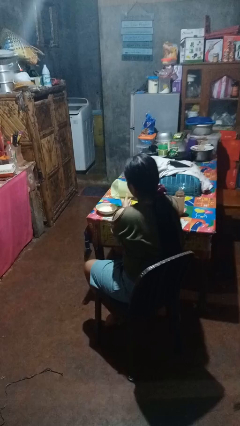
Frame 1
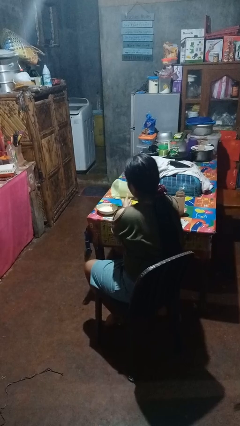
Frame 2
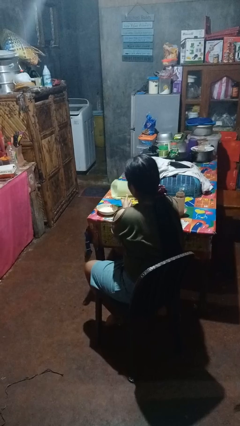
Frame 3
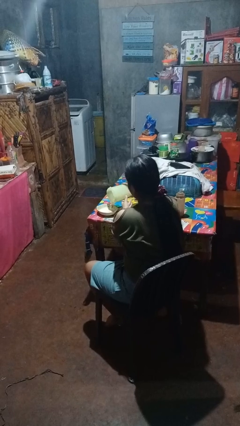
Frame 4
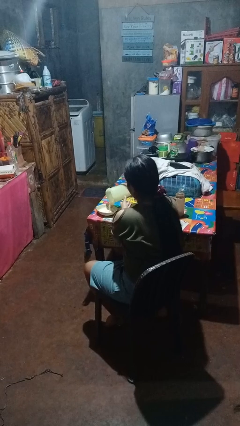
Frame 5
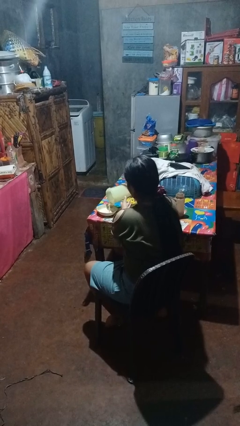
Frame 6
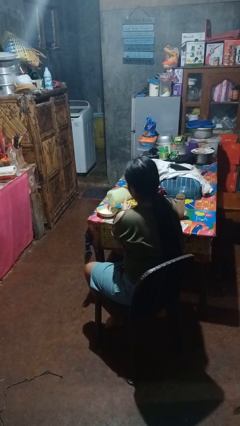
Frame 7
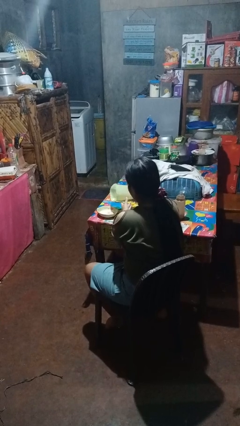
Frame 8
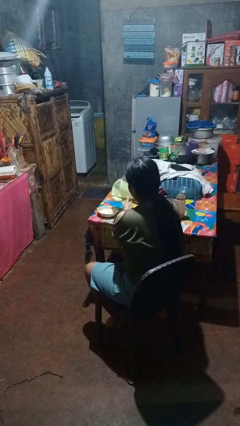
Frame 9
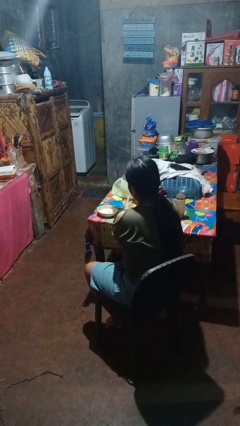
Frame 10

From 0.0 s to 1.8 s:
person pours into bowl

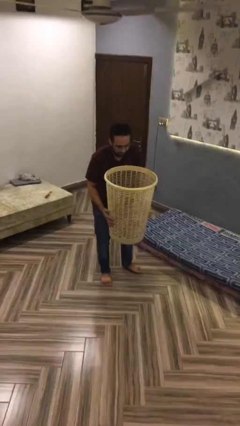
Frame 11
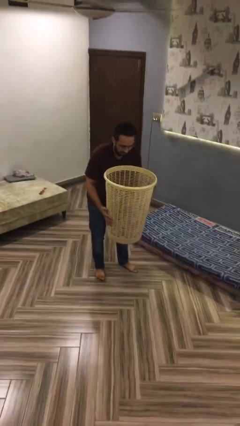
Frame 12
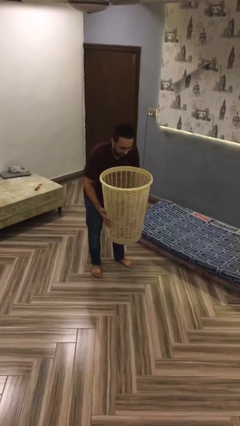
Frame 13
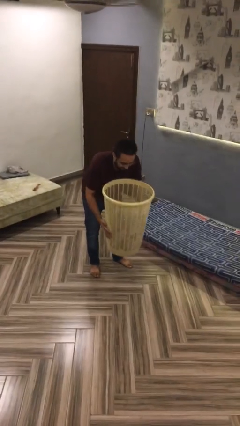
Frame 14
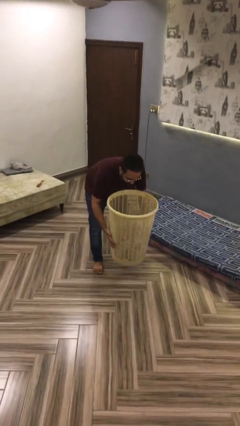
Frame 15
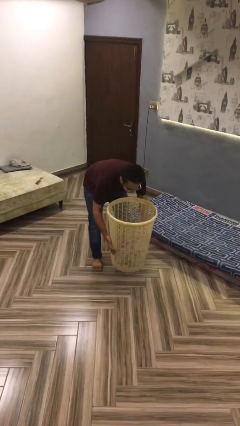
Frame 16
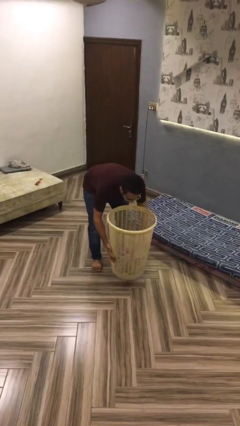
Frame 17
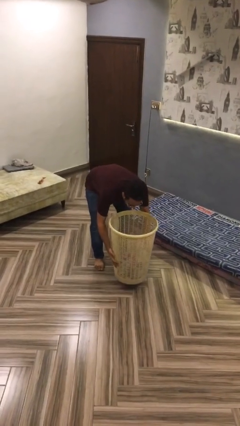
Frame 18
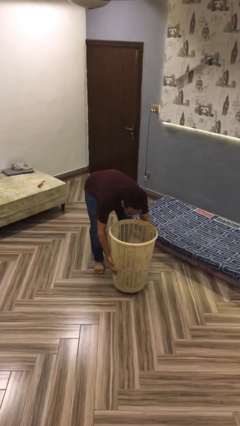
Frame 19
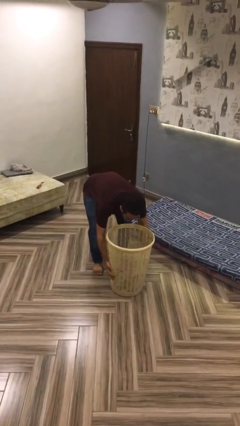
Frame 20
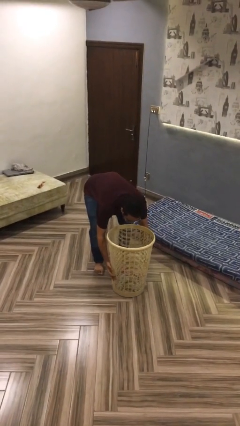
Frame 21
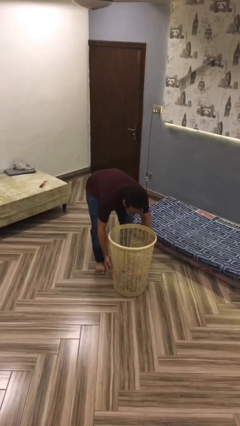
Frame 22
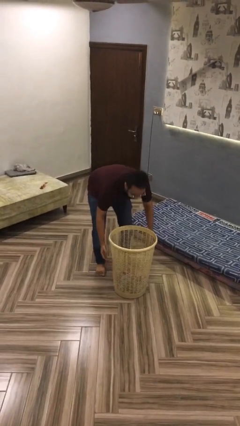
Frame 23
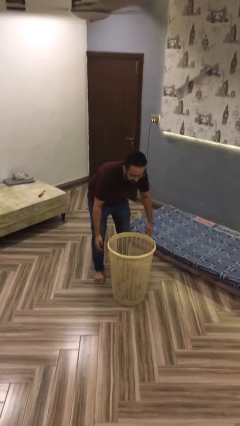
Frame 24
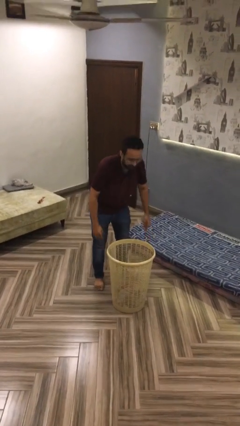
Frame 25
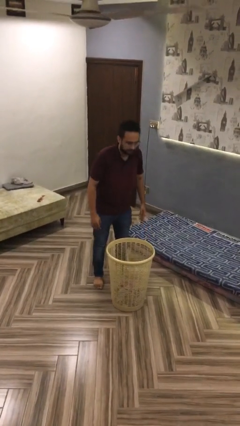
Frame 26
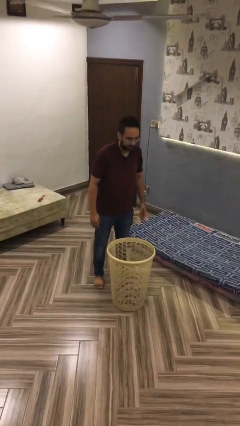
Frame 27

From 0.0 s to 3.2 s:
person puts down object on floor

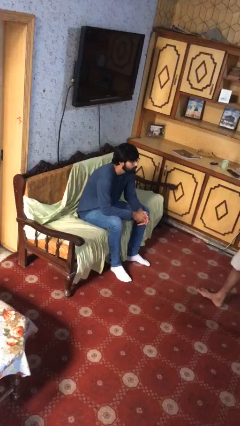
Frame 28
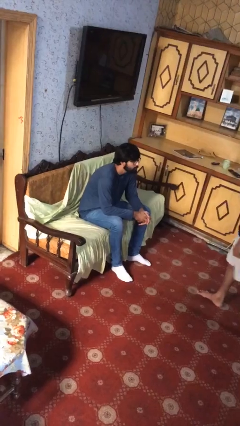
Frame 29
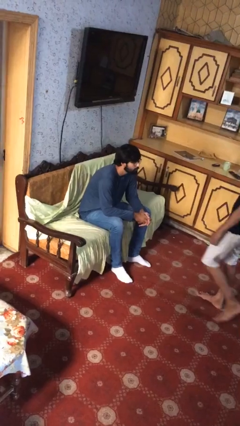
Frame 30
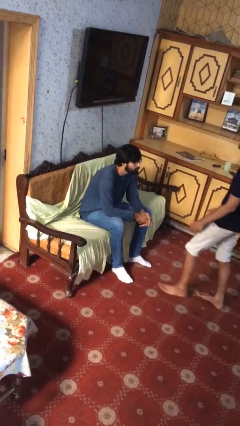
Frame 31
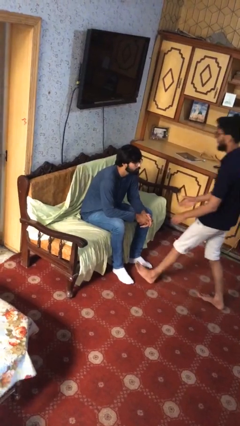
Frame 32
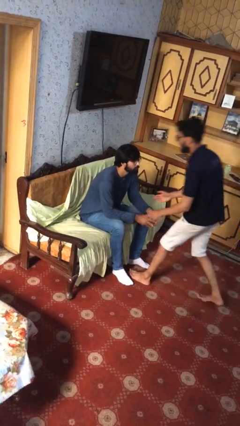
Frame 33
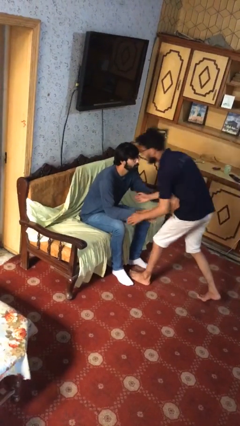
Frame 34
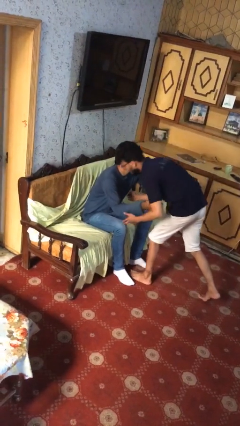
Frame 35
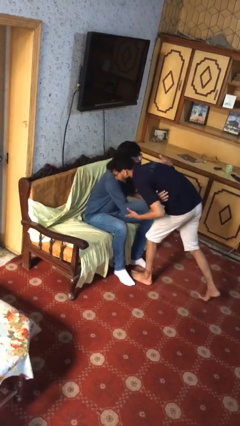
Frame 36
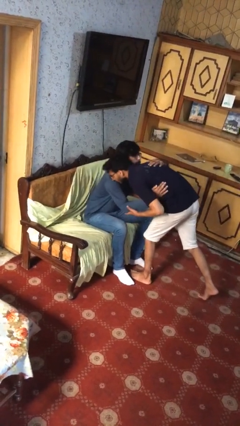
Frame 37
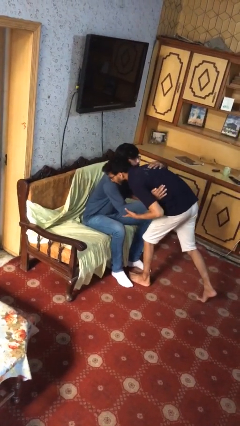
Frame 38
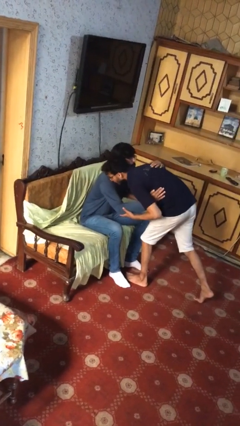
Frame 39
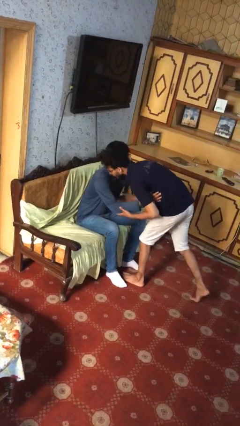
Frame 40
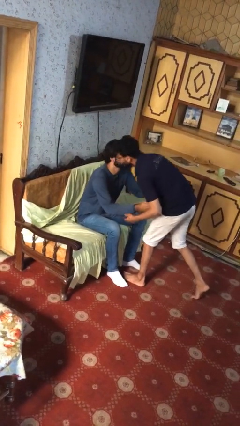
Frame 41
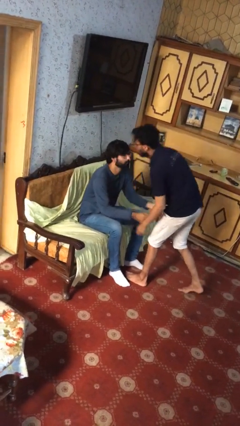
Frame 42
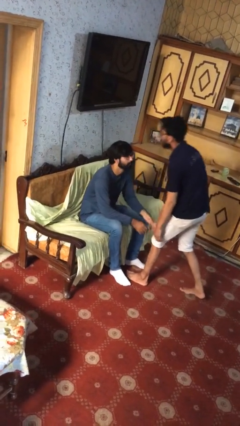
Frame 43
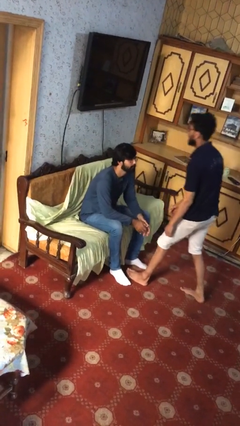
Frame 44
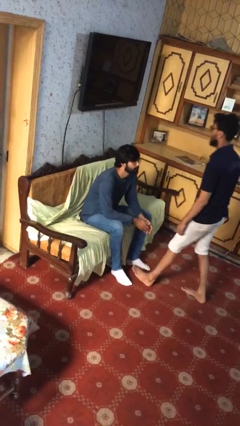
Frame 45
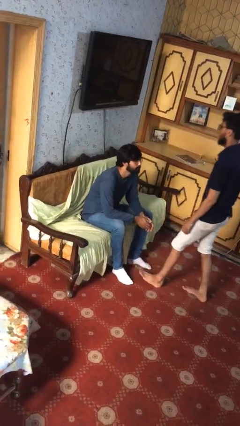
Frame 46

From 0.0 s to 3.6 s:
person embraces person

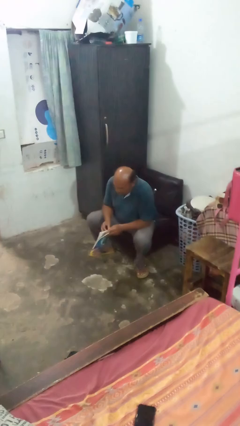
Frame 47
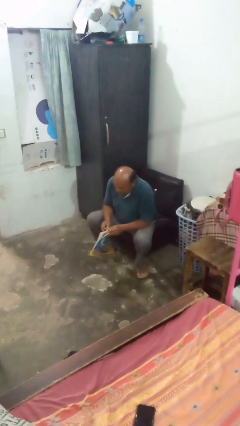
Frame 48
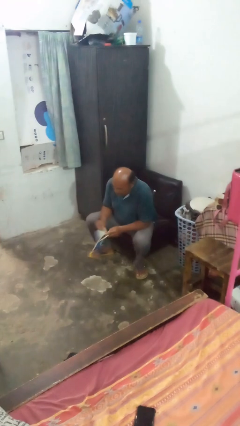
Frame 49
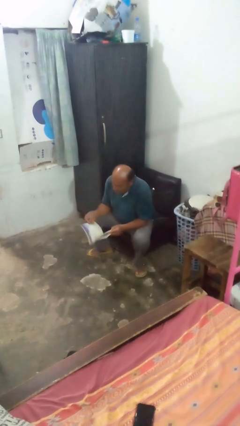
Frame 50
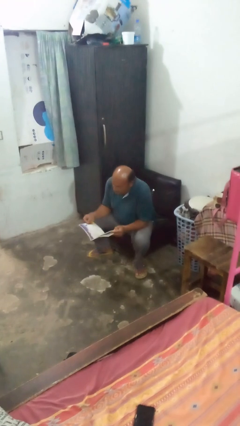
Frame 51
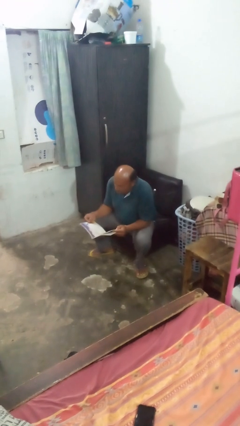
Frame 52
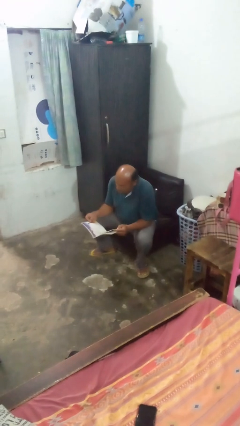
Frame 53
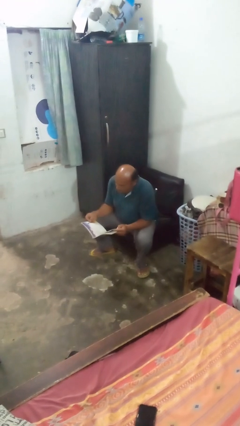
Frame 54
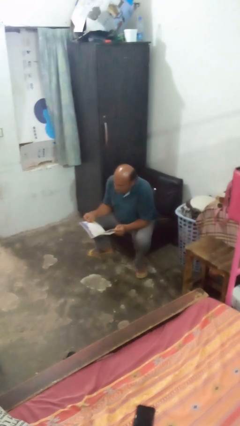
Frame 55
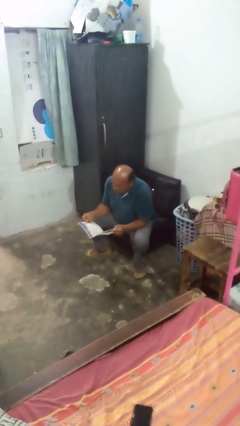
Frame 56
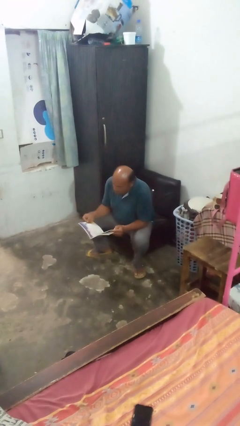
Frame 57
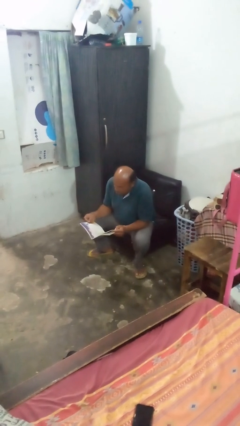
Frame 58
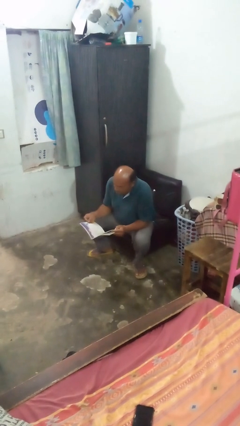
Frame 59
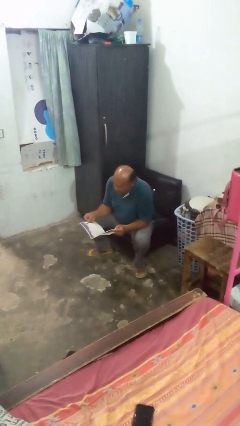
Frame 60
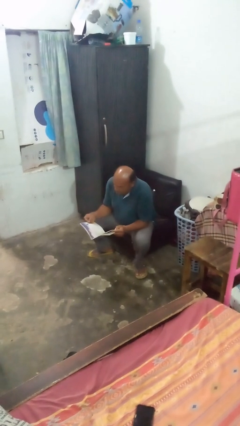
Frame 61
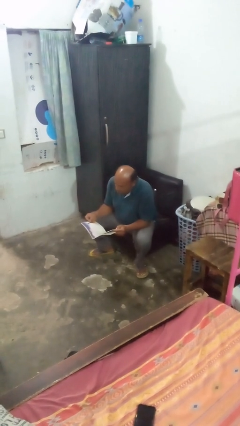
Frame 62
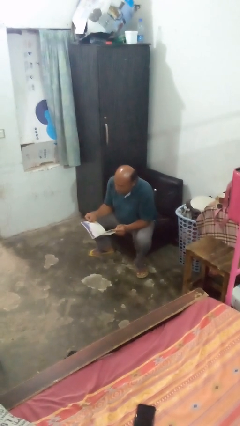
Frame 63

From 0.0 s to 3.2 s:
person reads book

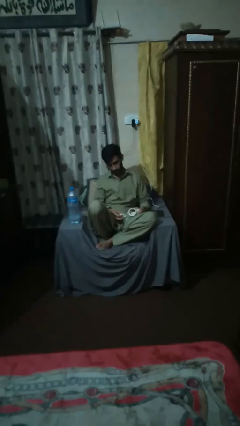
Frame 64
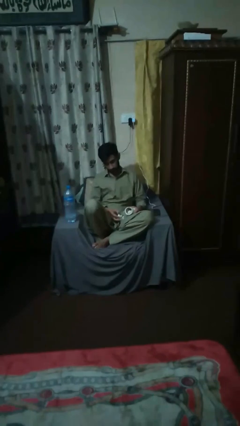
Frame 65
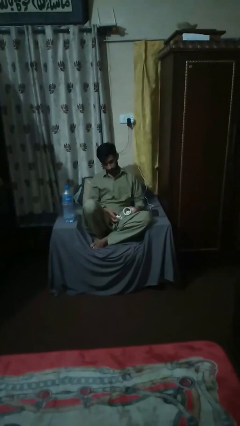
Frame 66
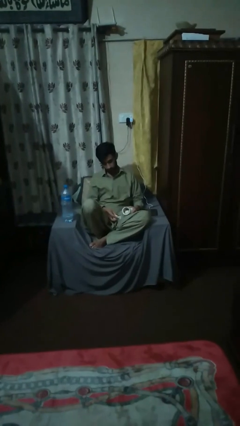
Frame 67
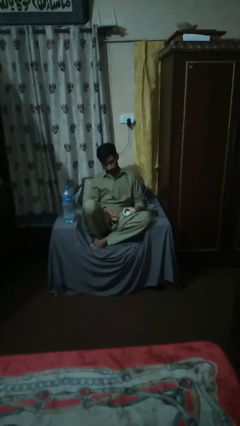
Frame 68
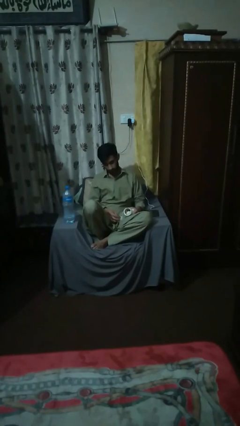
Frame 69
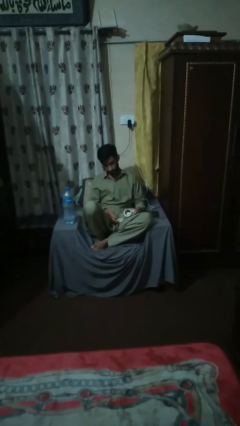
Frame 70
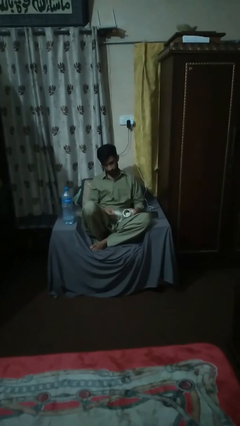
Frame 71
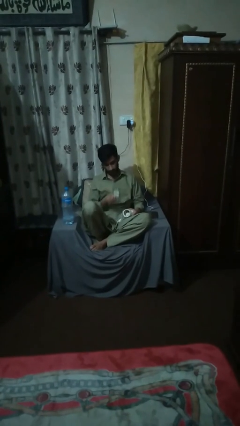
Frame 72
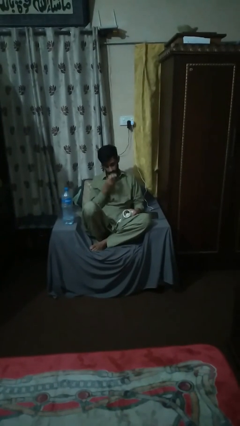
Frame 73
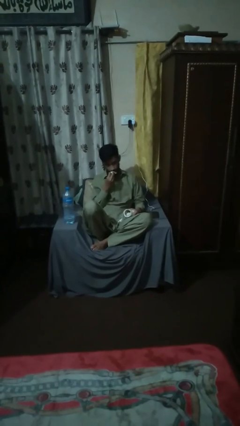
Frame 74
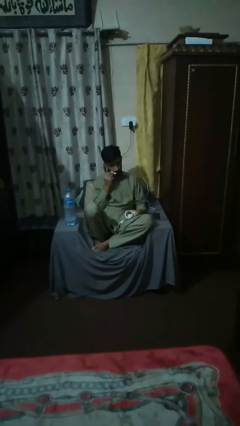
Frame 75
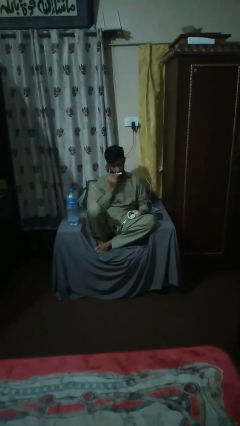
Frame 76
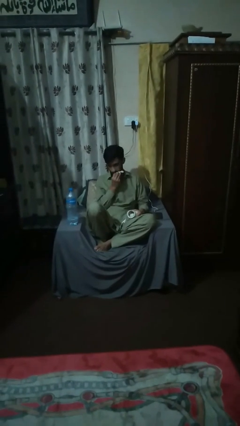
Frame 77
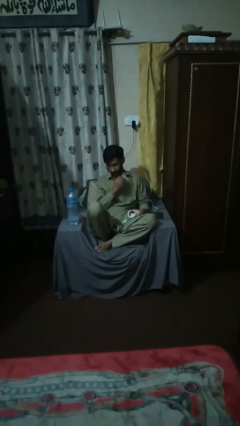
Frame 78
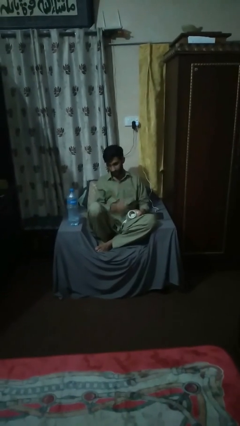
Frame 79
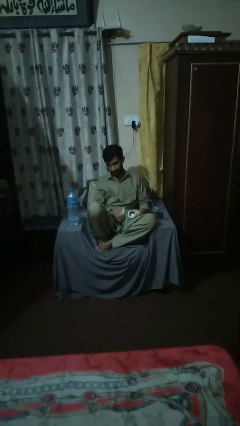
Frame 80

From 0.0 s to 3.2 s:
person wipes mouth with napkin

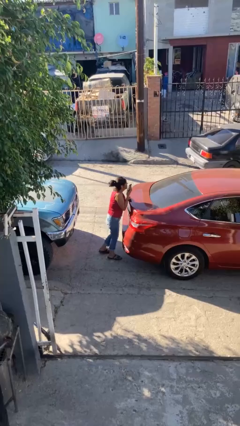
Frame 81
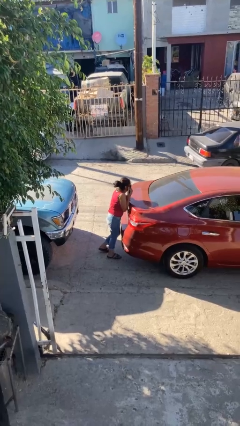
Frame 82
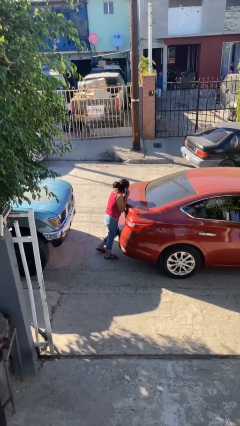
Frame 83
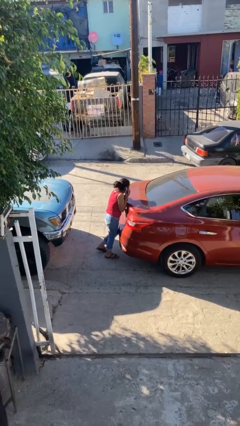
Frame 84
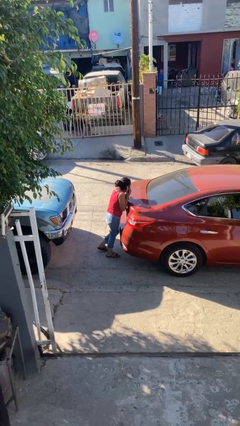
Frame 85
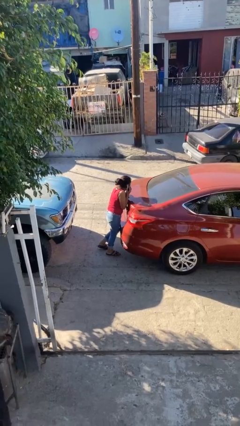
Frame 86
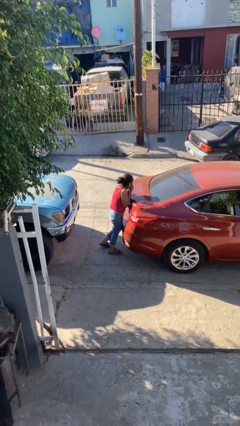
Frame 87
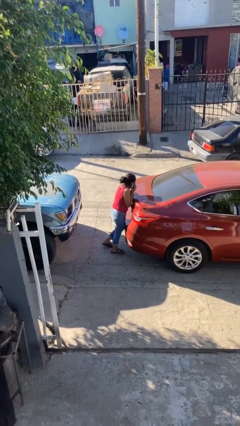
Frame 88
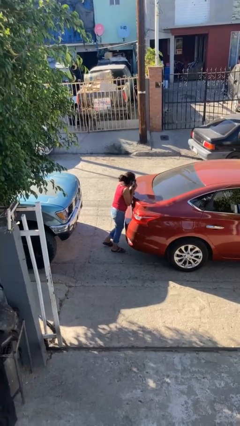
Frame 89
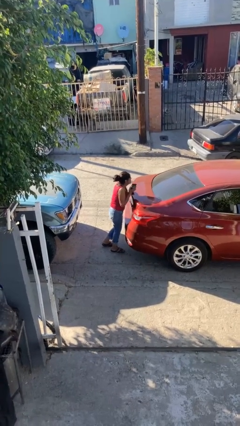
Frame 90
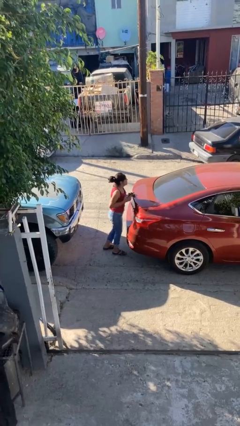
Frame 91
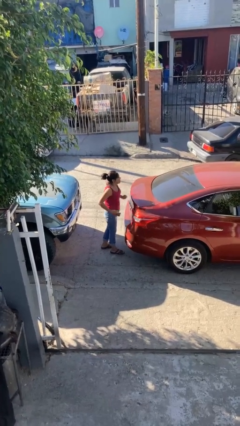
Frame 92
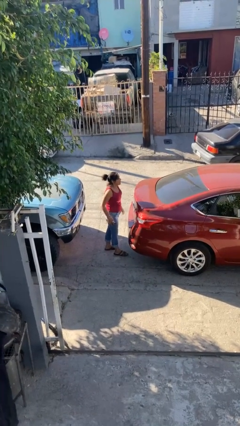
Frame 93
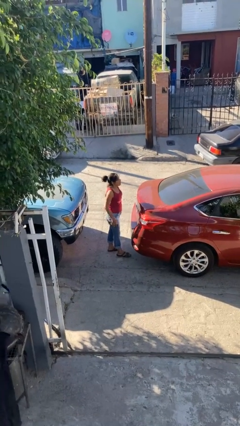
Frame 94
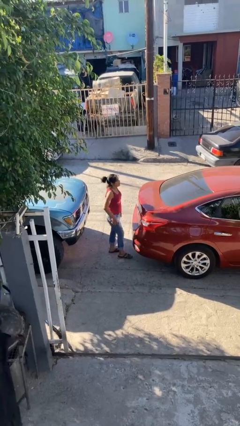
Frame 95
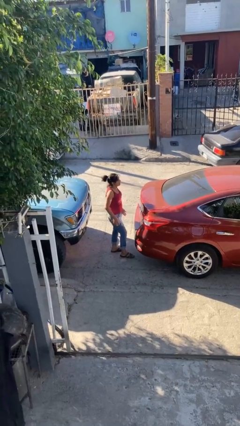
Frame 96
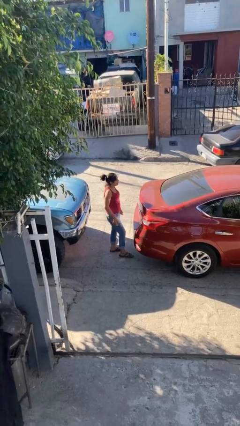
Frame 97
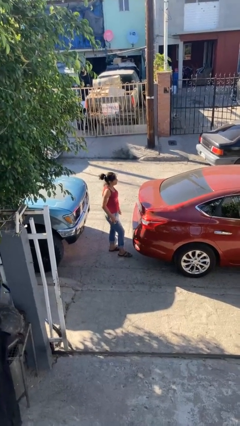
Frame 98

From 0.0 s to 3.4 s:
person leans against car
